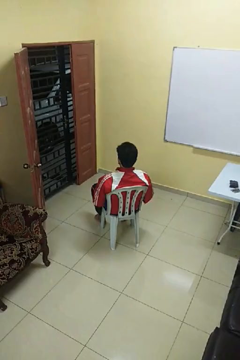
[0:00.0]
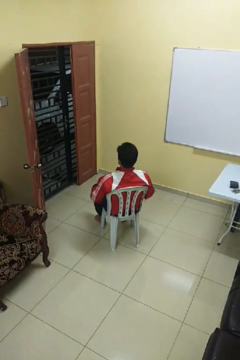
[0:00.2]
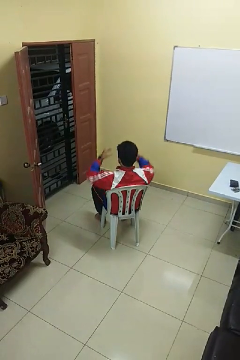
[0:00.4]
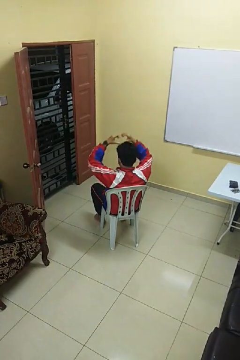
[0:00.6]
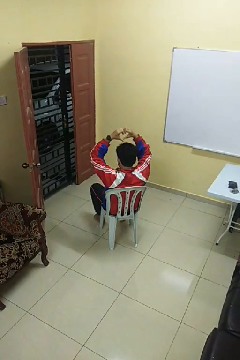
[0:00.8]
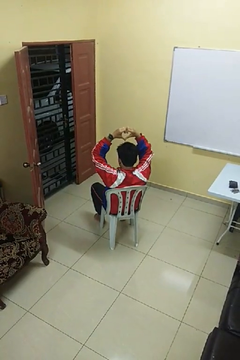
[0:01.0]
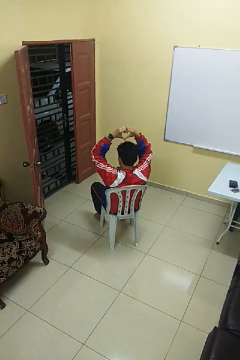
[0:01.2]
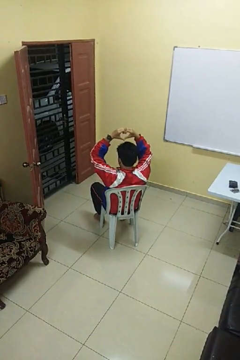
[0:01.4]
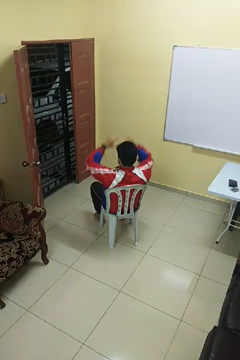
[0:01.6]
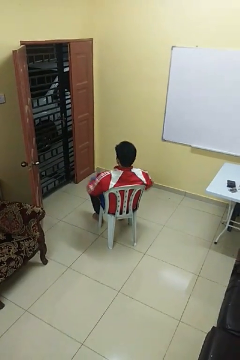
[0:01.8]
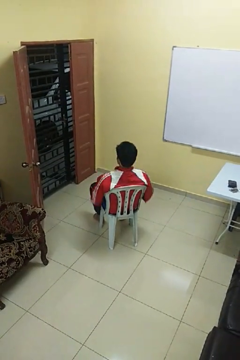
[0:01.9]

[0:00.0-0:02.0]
person gestures heart

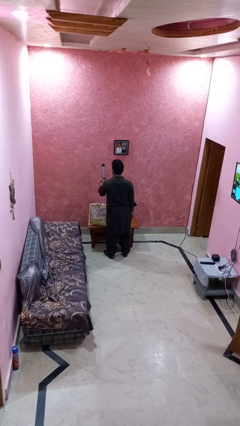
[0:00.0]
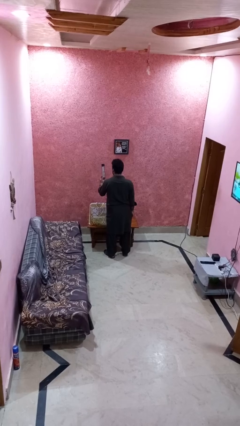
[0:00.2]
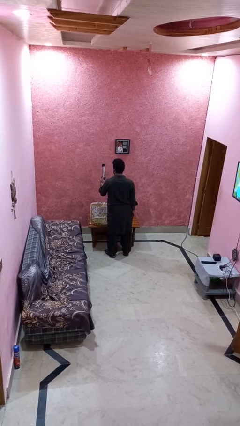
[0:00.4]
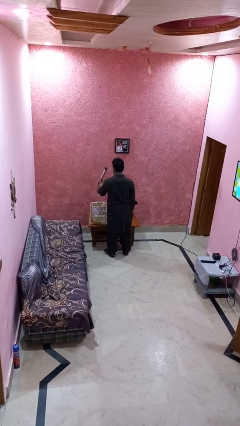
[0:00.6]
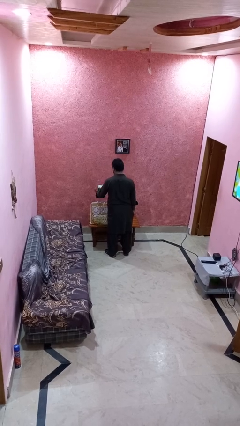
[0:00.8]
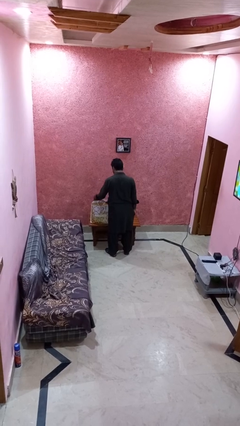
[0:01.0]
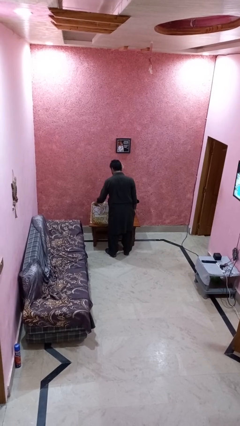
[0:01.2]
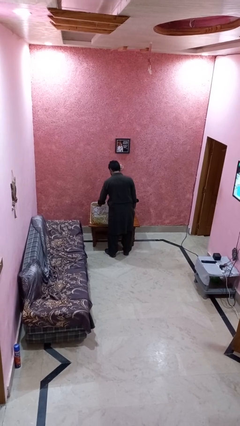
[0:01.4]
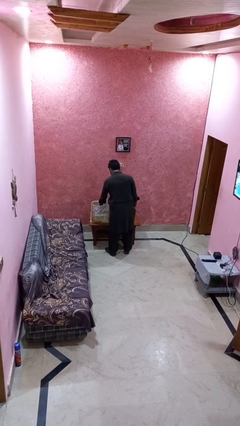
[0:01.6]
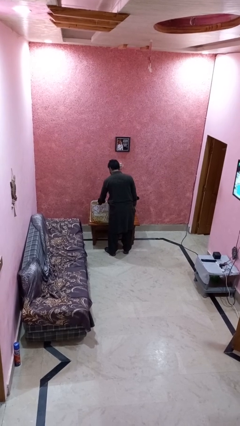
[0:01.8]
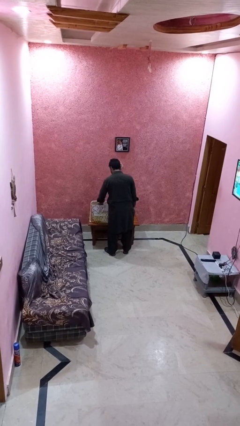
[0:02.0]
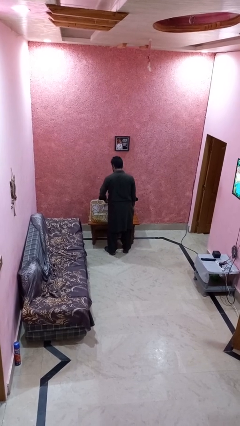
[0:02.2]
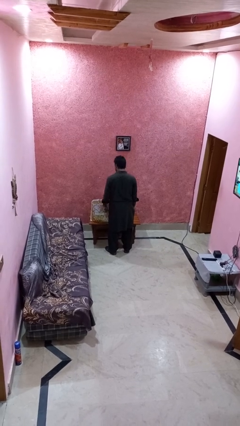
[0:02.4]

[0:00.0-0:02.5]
person puts object into bag

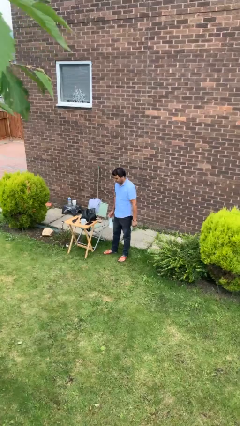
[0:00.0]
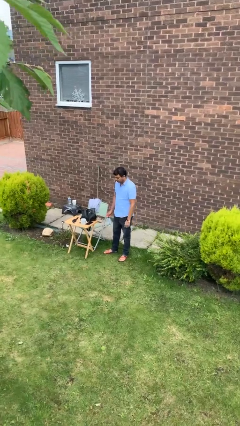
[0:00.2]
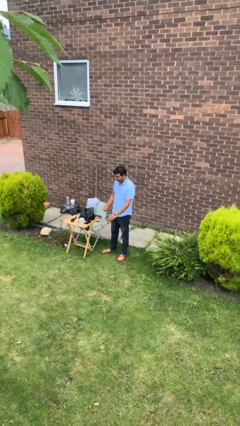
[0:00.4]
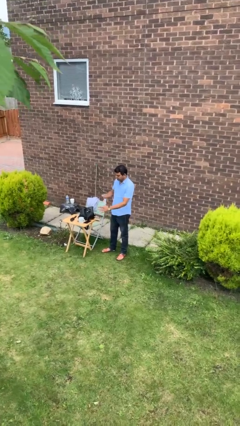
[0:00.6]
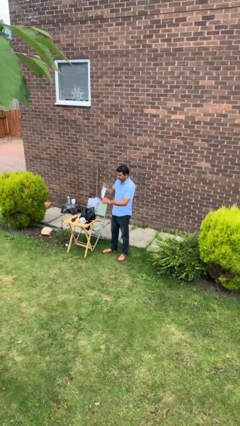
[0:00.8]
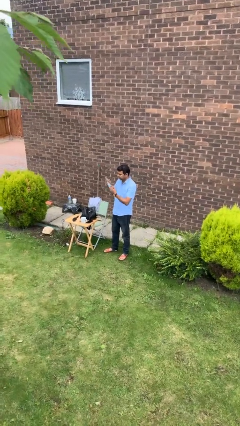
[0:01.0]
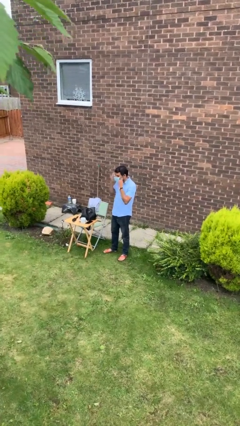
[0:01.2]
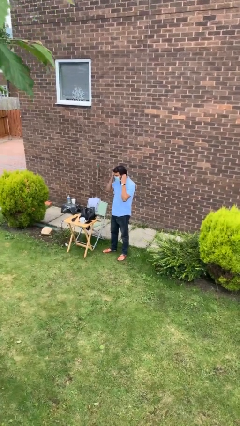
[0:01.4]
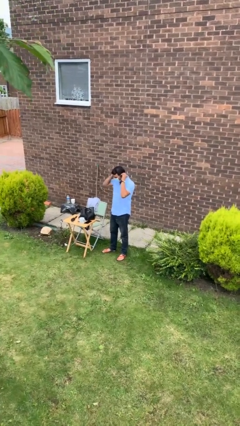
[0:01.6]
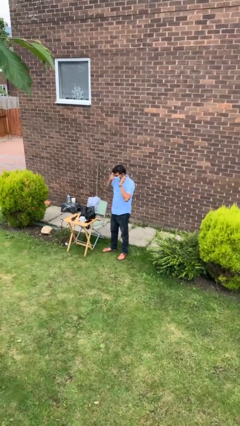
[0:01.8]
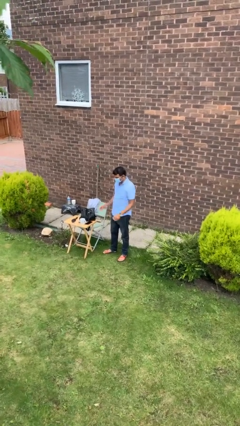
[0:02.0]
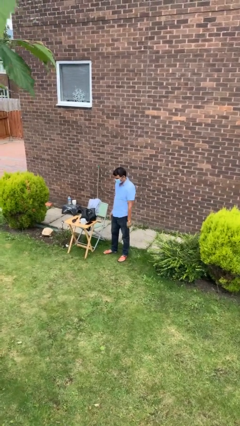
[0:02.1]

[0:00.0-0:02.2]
person puts on facemask

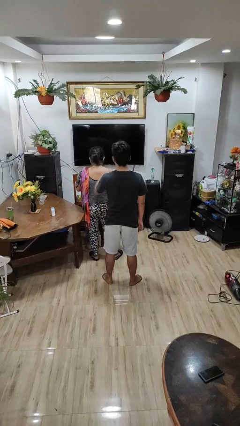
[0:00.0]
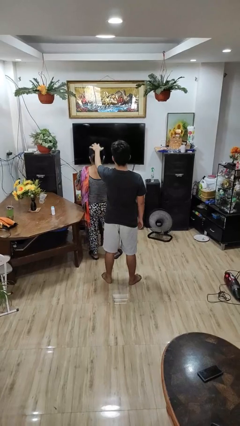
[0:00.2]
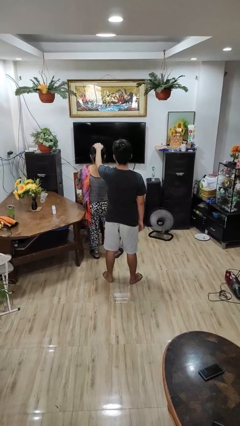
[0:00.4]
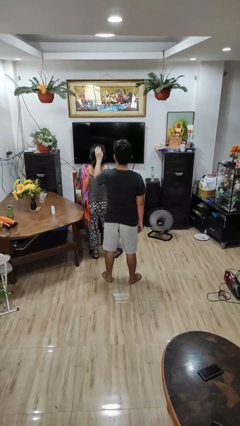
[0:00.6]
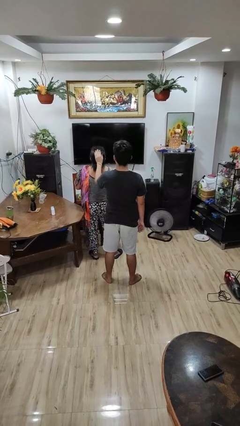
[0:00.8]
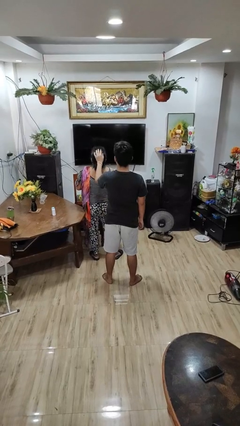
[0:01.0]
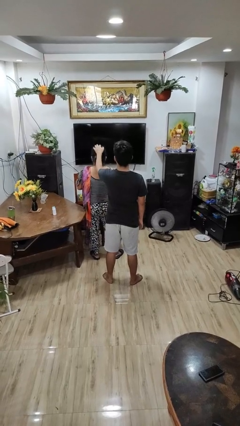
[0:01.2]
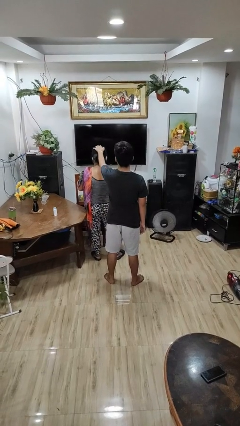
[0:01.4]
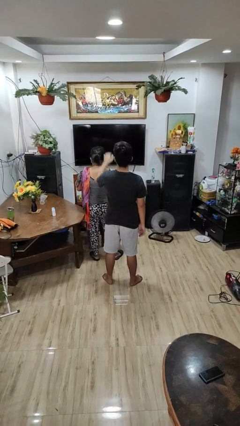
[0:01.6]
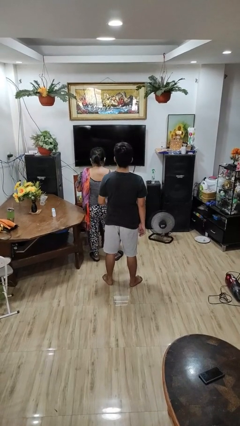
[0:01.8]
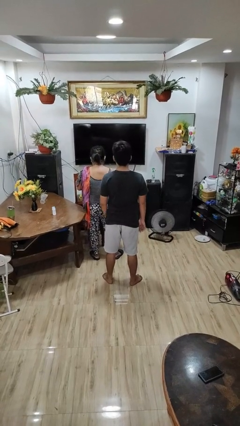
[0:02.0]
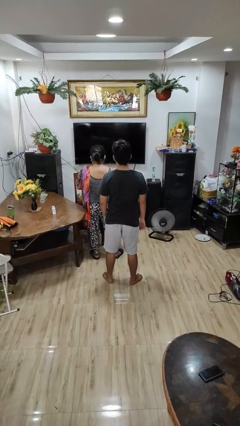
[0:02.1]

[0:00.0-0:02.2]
person grabs person by hair

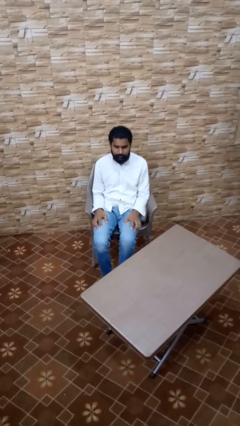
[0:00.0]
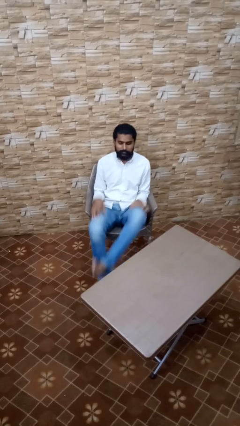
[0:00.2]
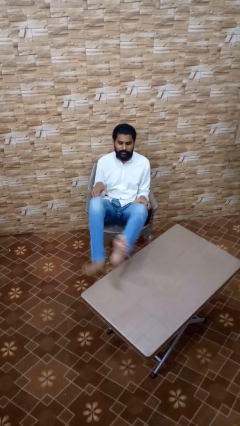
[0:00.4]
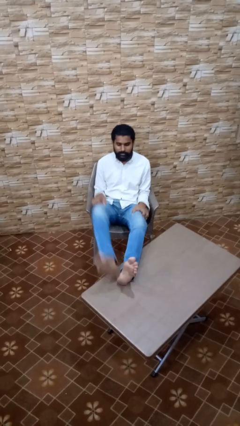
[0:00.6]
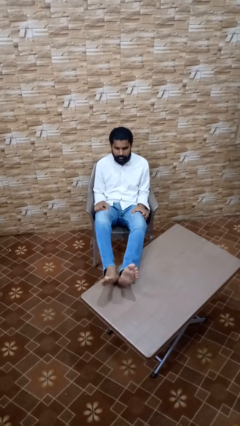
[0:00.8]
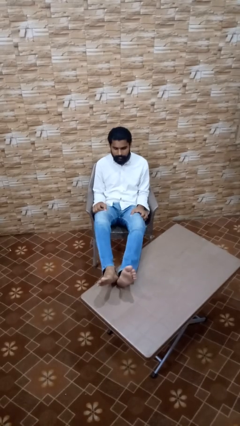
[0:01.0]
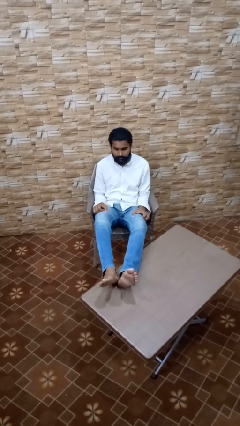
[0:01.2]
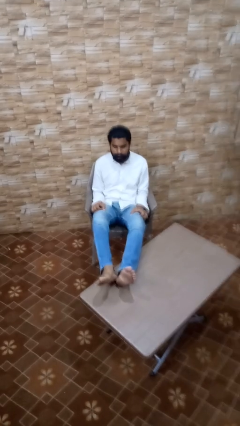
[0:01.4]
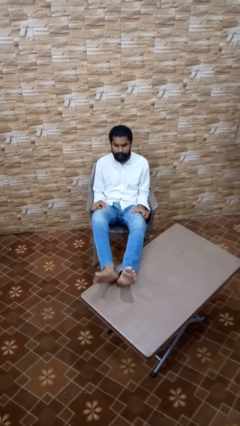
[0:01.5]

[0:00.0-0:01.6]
person puts feet up

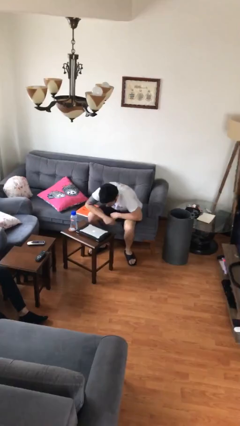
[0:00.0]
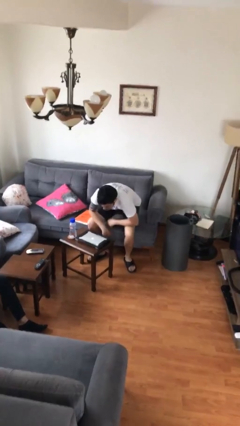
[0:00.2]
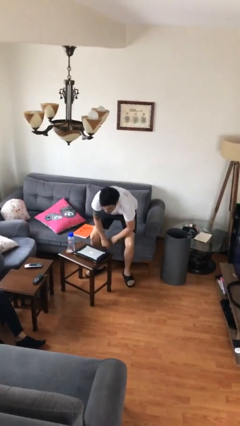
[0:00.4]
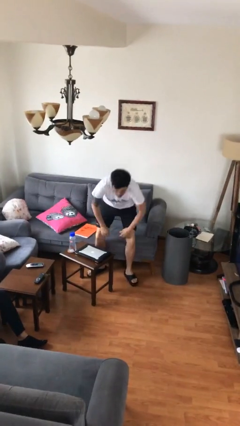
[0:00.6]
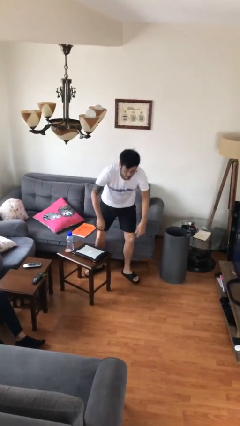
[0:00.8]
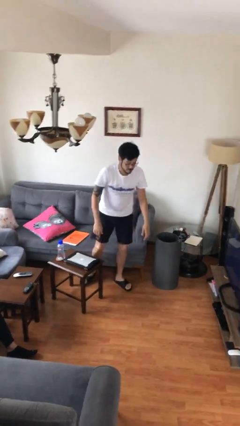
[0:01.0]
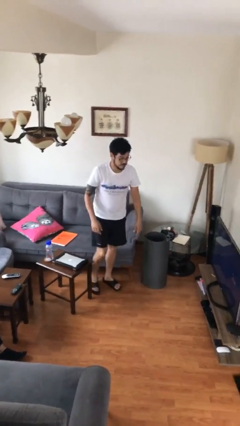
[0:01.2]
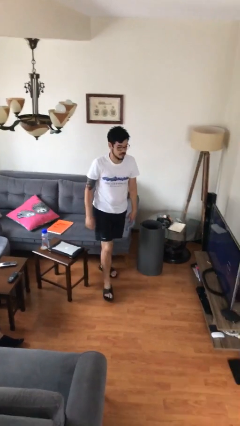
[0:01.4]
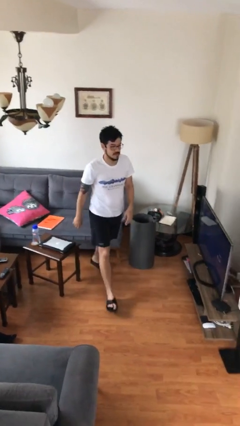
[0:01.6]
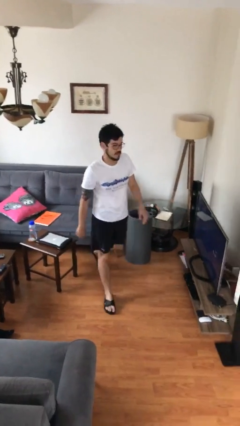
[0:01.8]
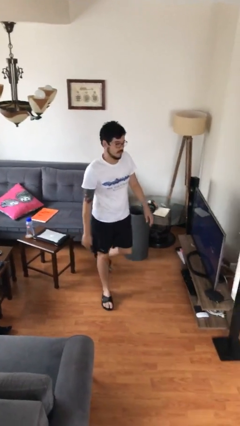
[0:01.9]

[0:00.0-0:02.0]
person stands up

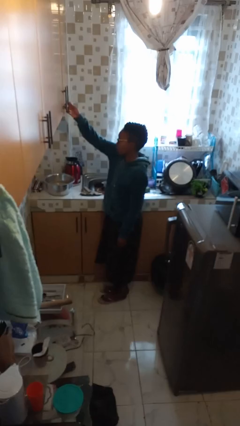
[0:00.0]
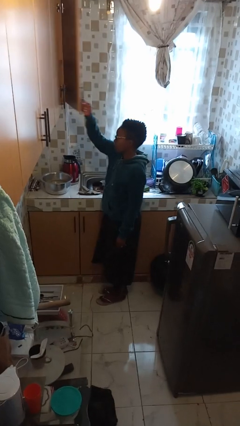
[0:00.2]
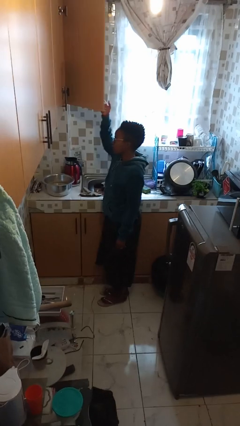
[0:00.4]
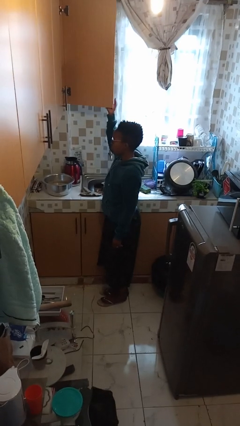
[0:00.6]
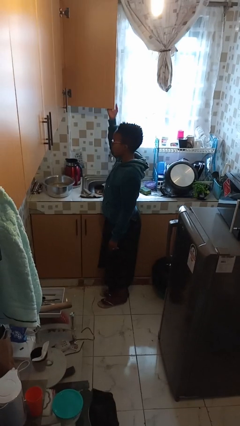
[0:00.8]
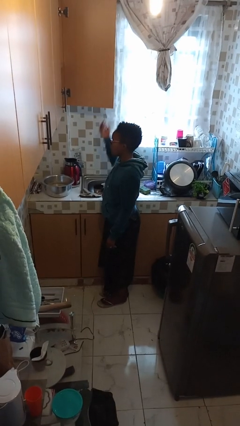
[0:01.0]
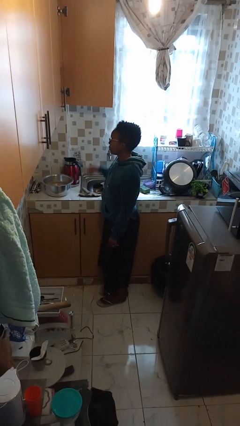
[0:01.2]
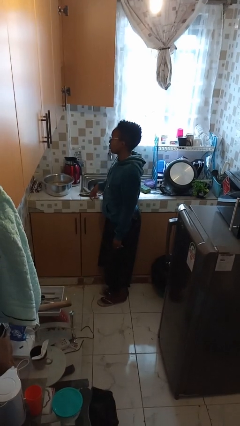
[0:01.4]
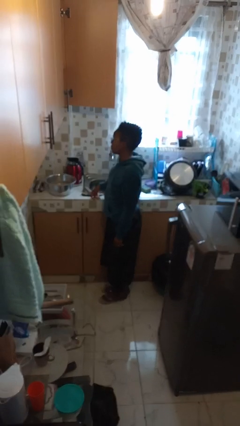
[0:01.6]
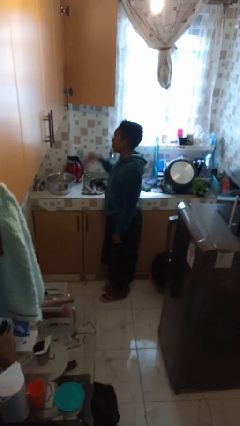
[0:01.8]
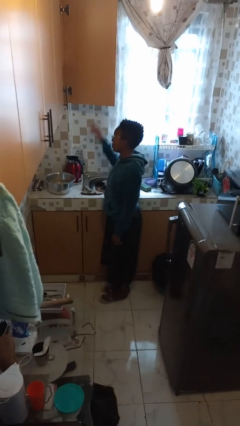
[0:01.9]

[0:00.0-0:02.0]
person opens cabinet

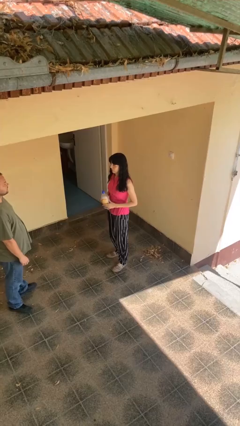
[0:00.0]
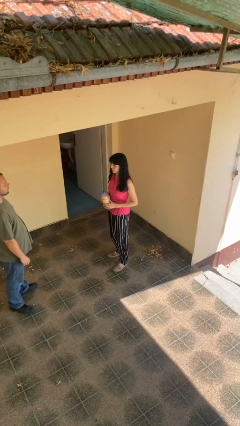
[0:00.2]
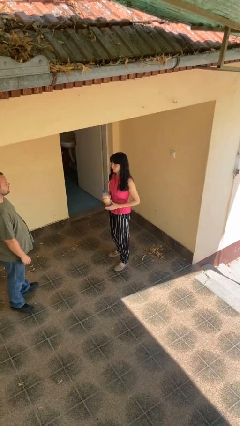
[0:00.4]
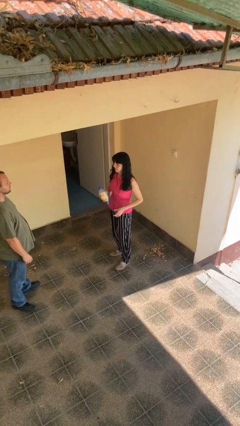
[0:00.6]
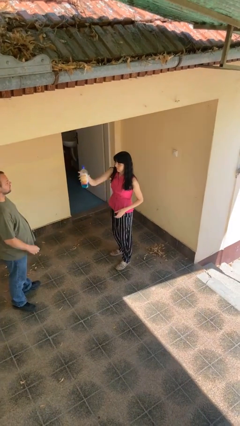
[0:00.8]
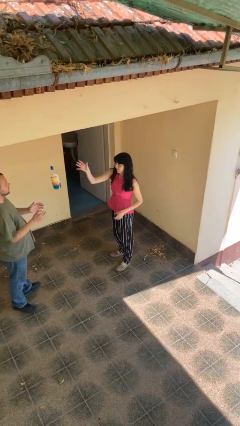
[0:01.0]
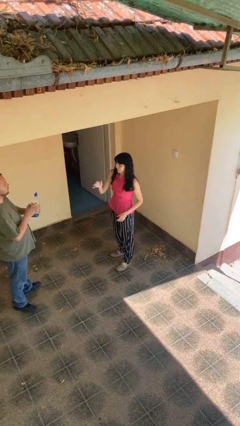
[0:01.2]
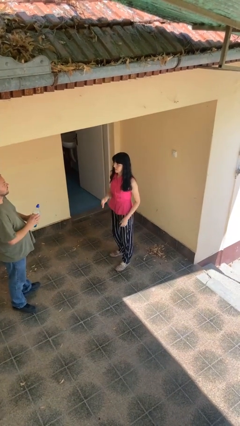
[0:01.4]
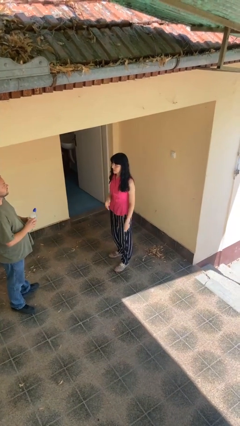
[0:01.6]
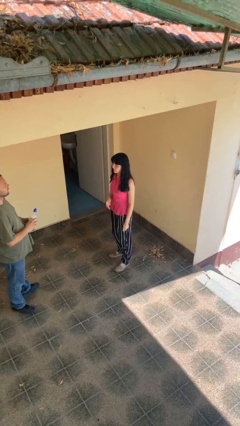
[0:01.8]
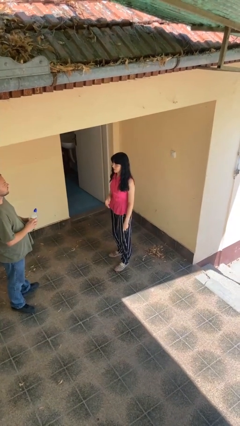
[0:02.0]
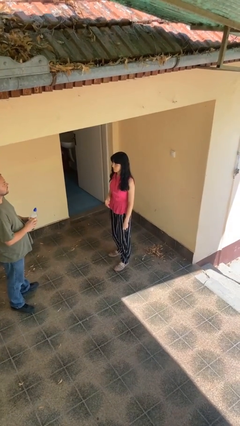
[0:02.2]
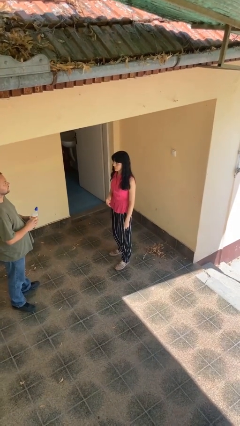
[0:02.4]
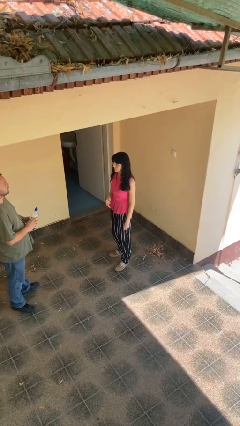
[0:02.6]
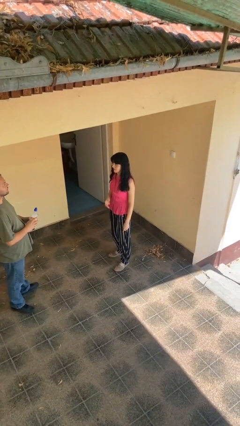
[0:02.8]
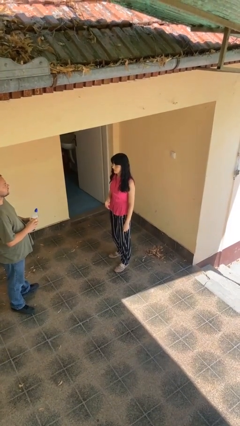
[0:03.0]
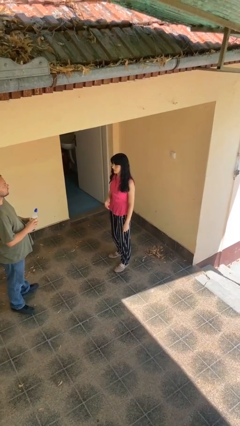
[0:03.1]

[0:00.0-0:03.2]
person throws object to person
